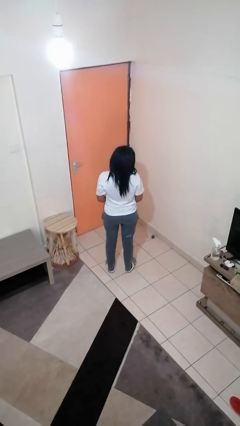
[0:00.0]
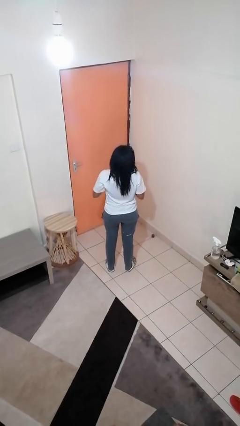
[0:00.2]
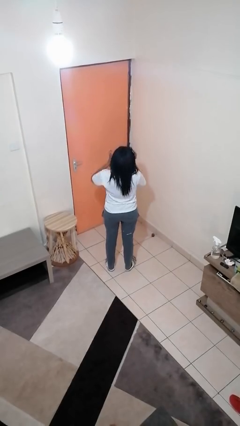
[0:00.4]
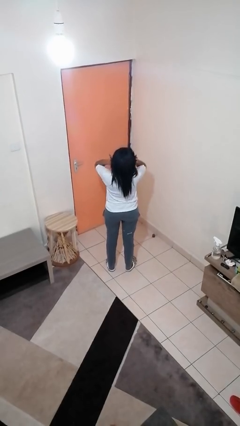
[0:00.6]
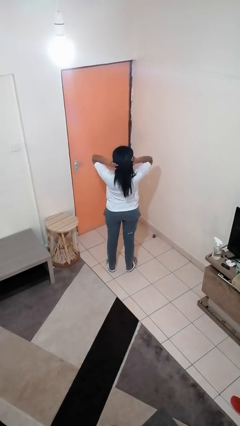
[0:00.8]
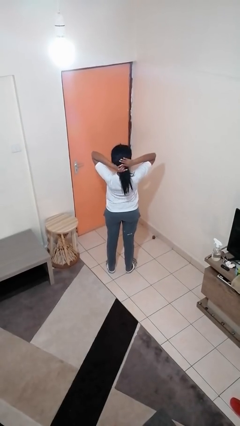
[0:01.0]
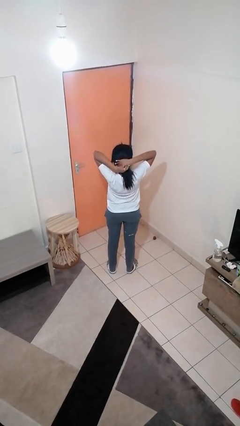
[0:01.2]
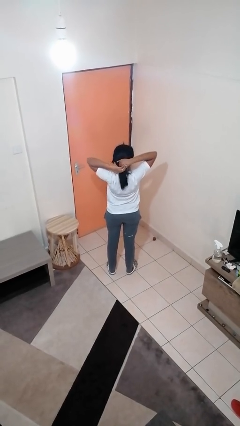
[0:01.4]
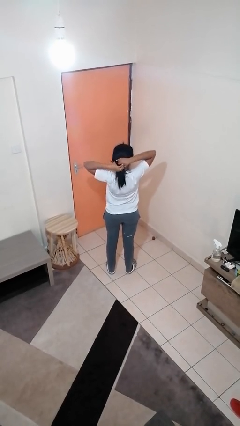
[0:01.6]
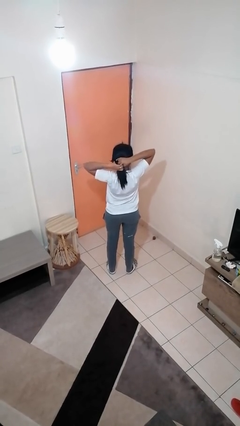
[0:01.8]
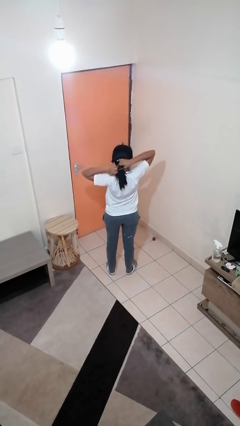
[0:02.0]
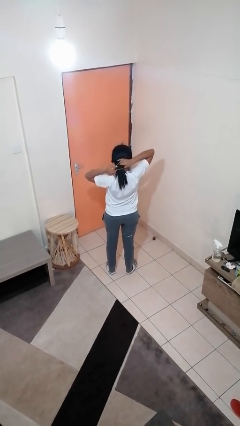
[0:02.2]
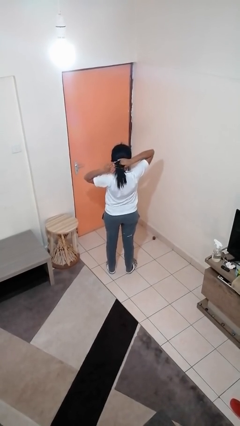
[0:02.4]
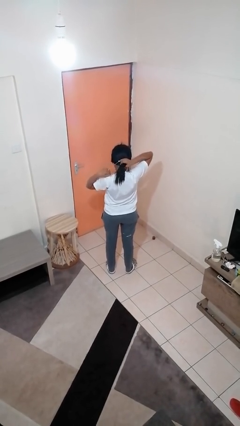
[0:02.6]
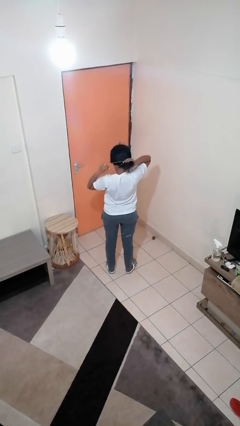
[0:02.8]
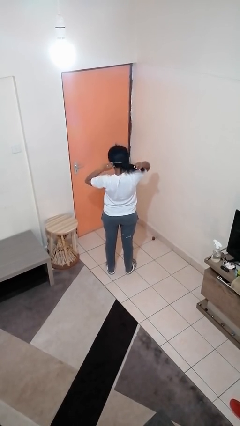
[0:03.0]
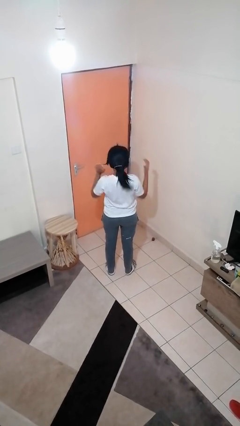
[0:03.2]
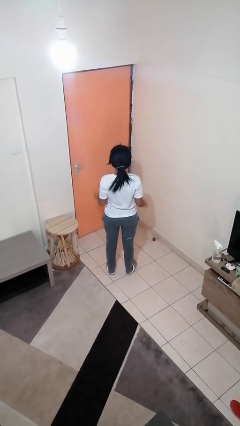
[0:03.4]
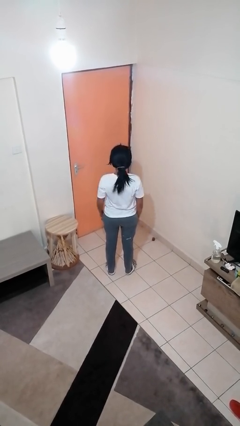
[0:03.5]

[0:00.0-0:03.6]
person puts hair in ponytail

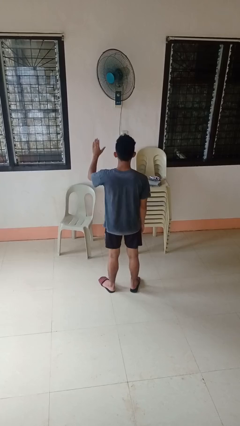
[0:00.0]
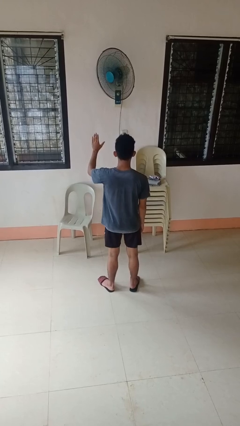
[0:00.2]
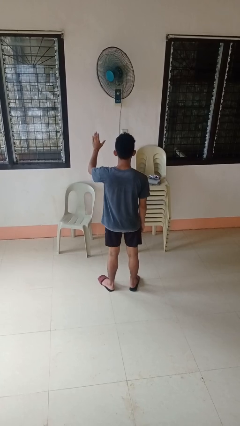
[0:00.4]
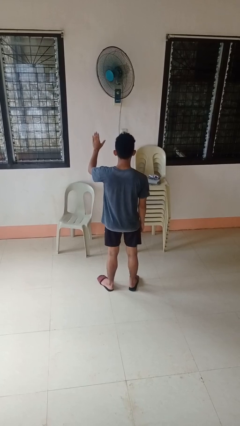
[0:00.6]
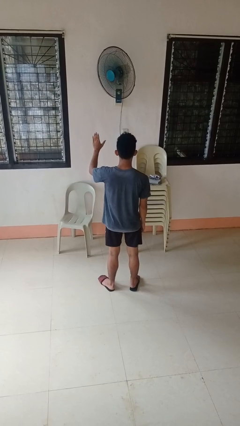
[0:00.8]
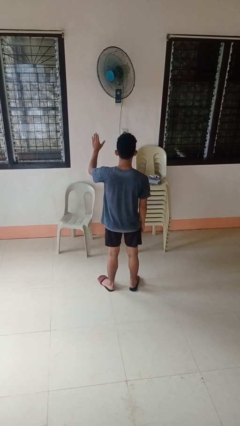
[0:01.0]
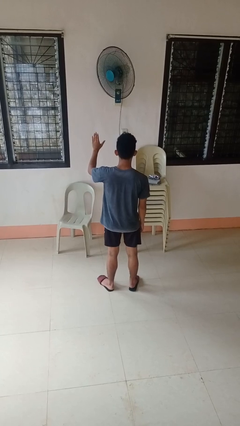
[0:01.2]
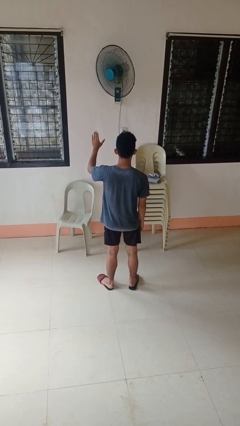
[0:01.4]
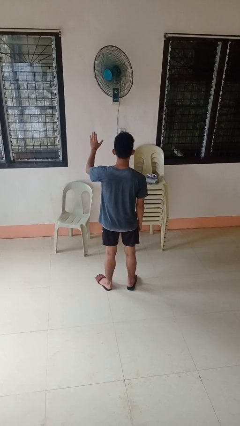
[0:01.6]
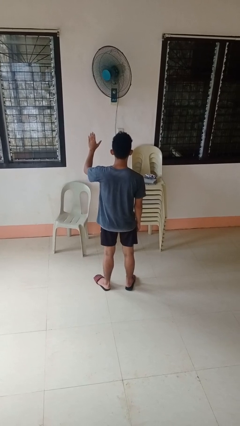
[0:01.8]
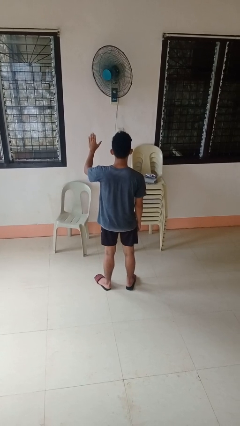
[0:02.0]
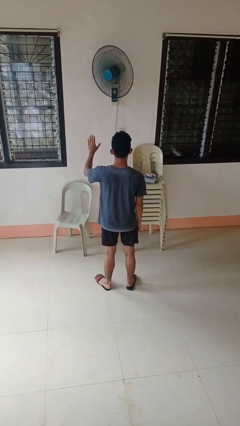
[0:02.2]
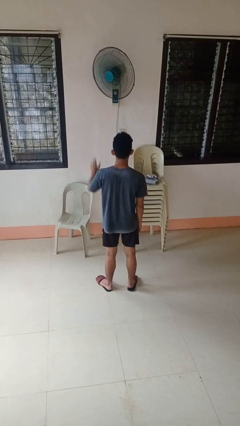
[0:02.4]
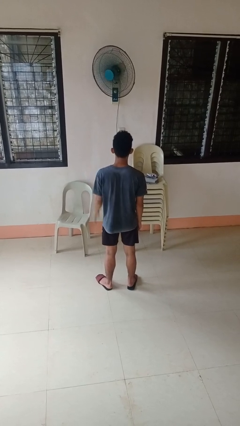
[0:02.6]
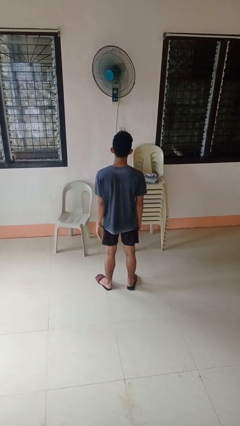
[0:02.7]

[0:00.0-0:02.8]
person gestures stop

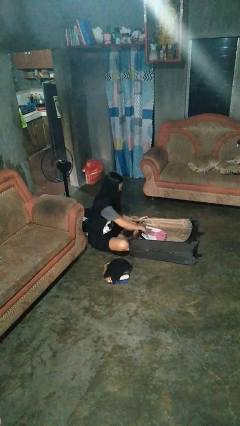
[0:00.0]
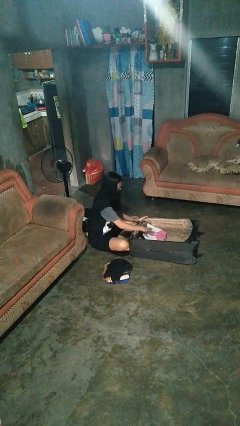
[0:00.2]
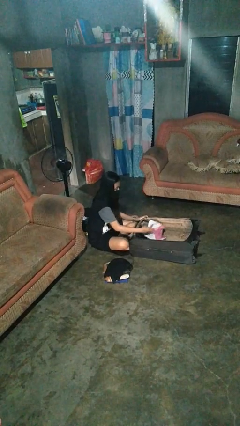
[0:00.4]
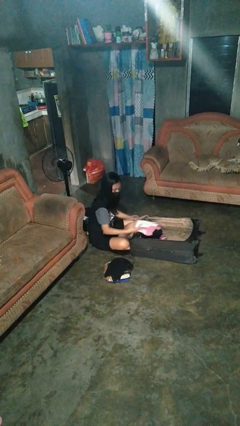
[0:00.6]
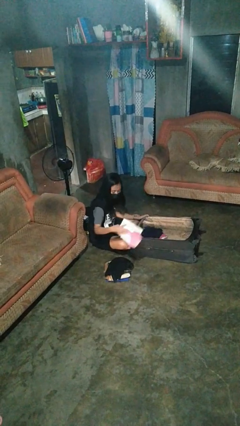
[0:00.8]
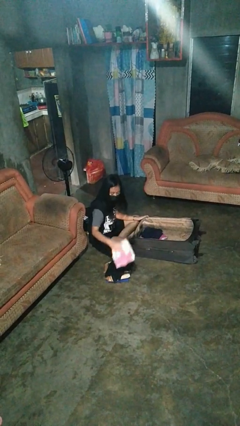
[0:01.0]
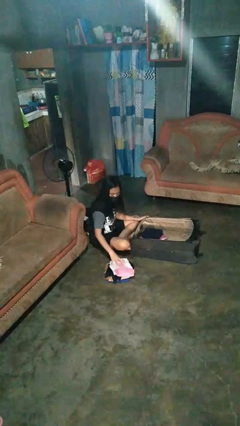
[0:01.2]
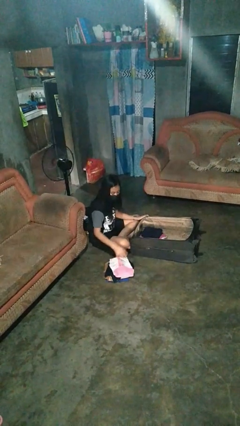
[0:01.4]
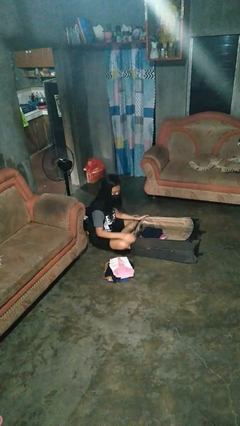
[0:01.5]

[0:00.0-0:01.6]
person unloads clothes from suitcase

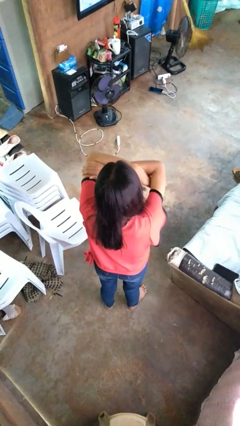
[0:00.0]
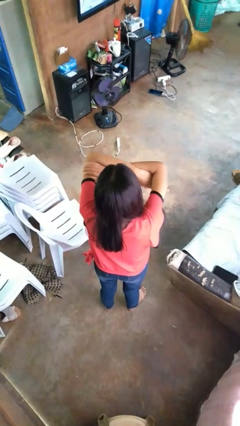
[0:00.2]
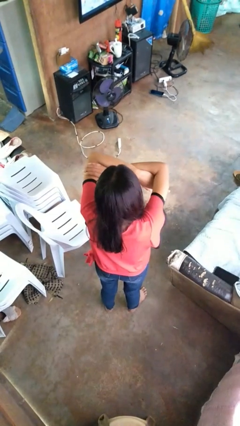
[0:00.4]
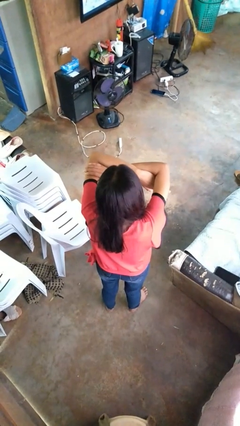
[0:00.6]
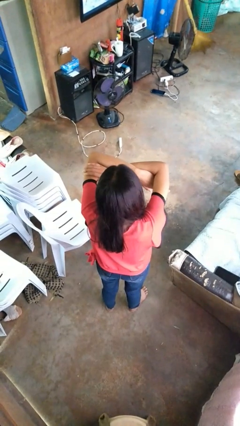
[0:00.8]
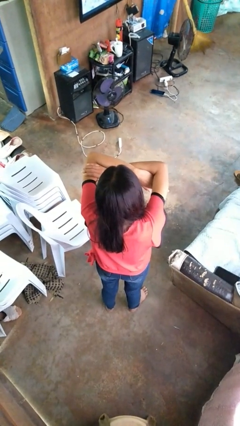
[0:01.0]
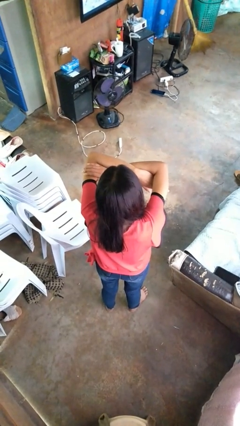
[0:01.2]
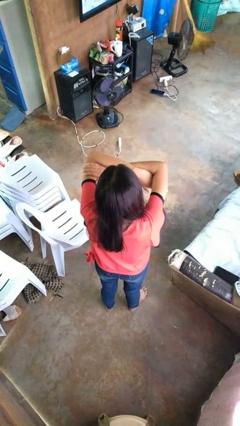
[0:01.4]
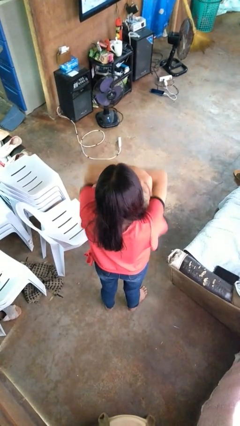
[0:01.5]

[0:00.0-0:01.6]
person gestures arms x

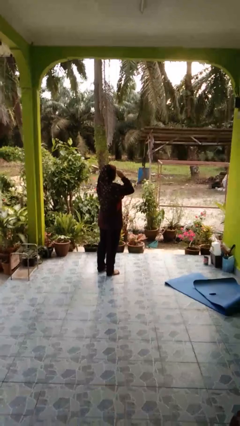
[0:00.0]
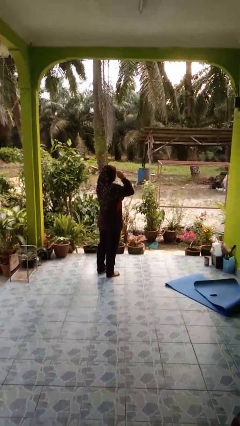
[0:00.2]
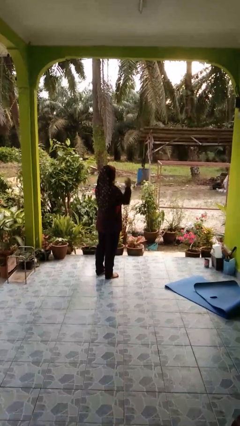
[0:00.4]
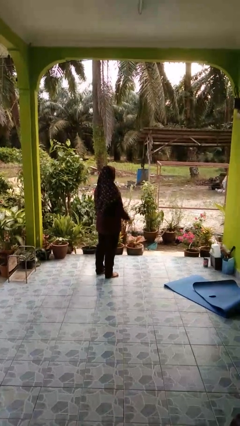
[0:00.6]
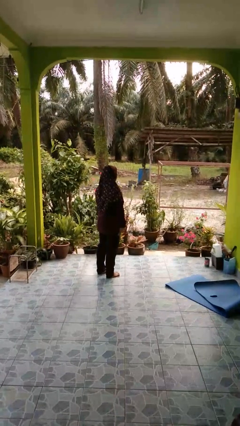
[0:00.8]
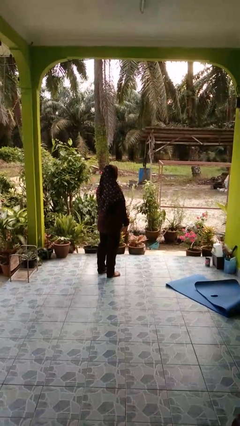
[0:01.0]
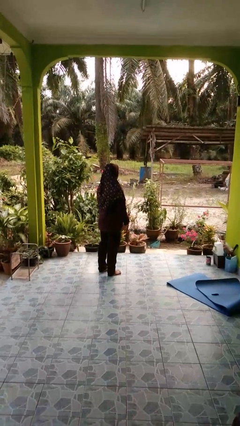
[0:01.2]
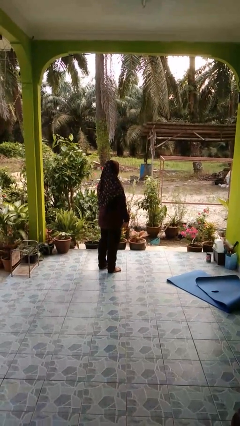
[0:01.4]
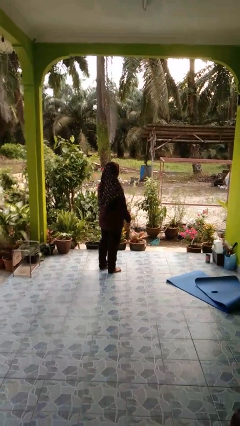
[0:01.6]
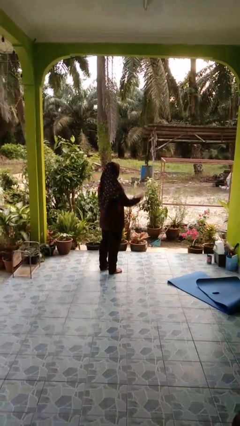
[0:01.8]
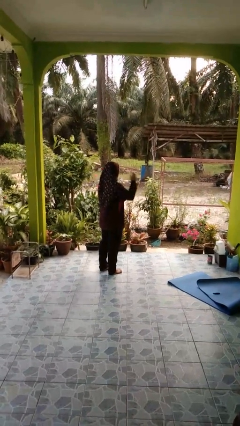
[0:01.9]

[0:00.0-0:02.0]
person puts on glasses

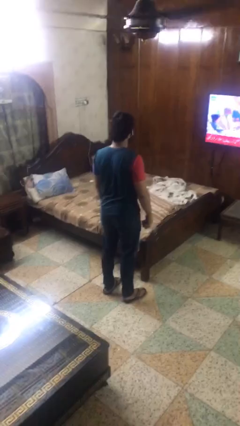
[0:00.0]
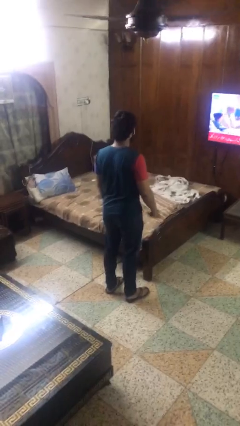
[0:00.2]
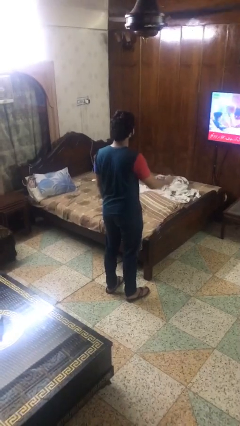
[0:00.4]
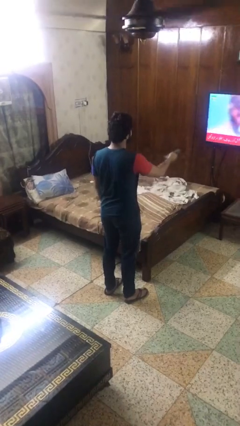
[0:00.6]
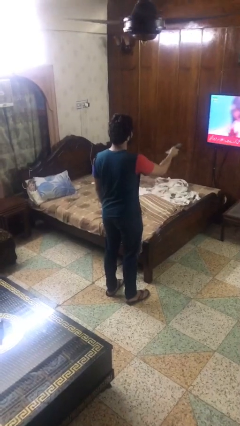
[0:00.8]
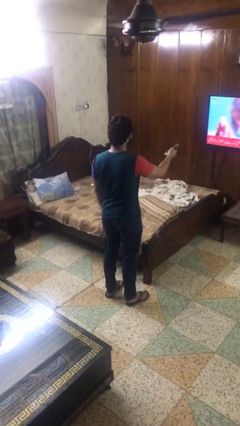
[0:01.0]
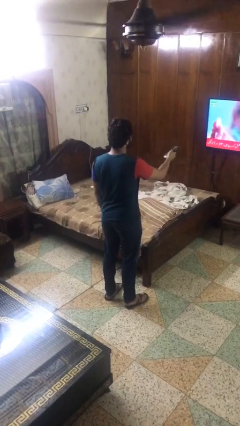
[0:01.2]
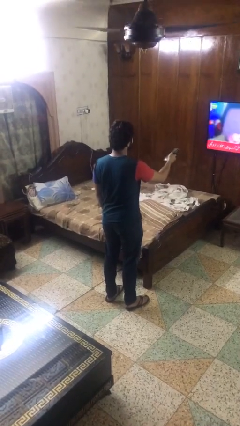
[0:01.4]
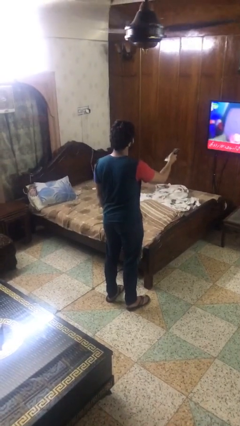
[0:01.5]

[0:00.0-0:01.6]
person uses television remote

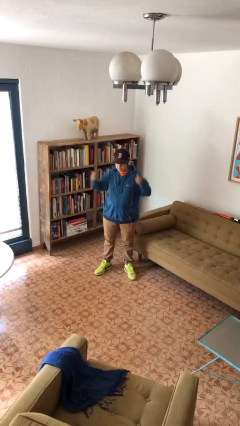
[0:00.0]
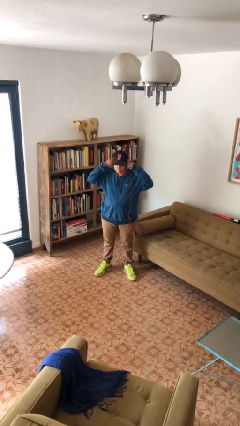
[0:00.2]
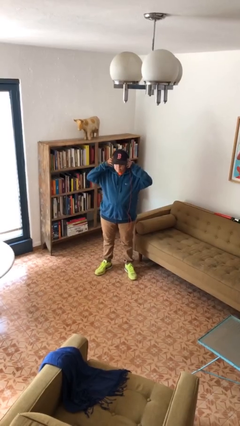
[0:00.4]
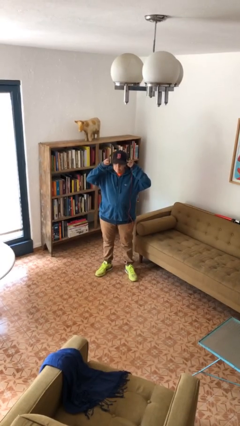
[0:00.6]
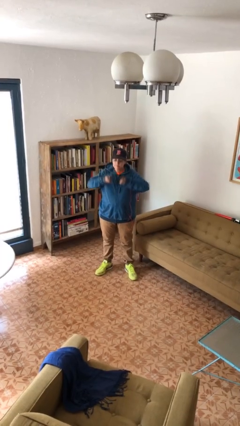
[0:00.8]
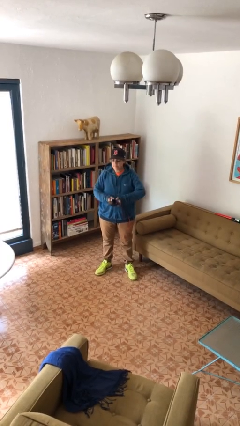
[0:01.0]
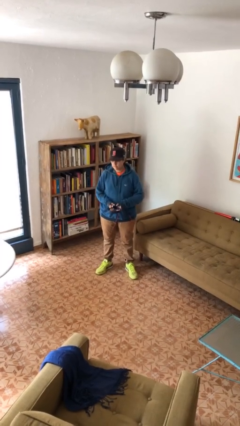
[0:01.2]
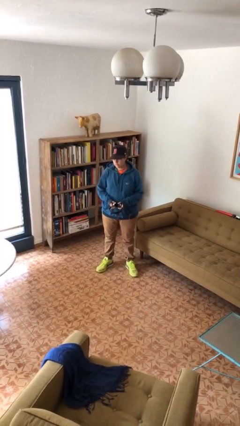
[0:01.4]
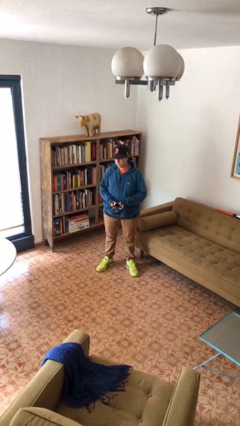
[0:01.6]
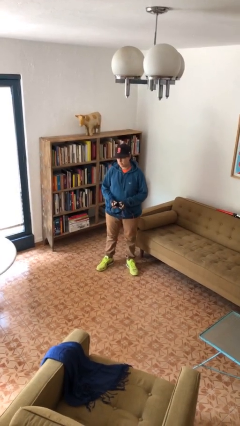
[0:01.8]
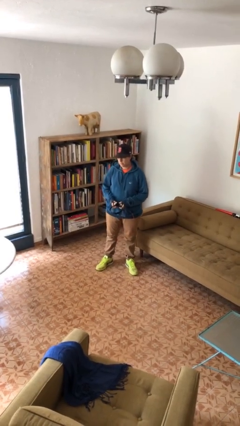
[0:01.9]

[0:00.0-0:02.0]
person takes off headphones

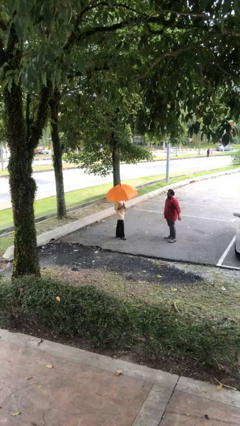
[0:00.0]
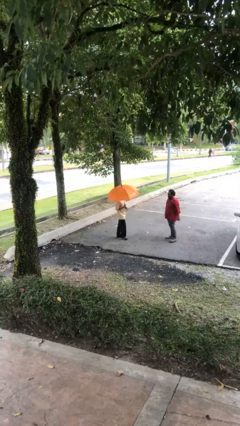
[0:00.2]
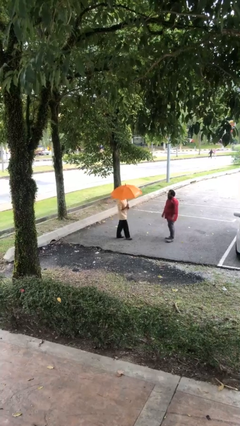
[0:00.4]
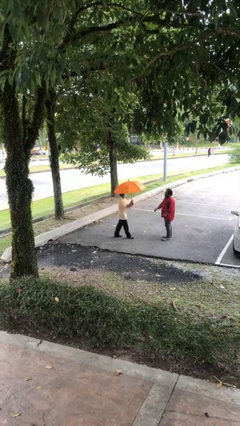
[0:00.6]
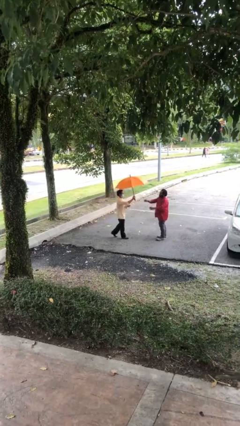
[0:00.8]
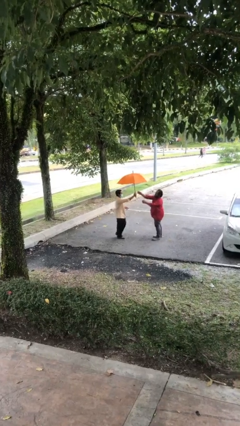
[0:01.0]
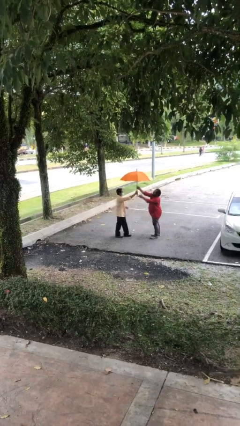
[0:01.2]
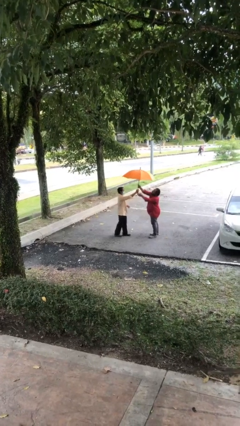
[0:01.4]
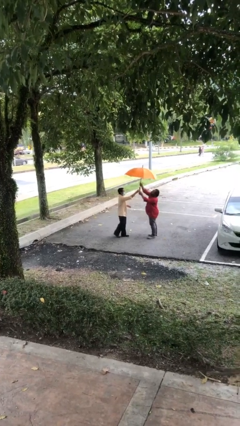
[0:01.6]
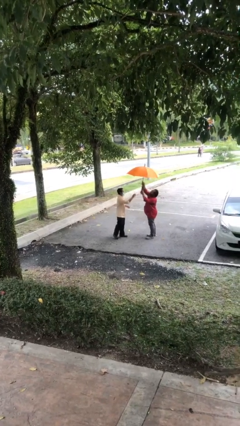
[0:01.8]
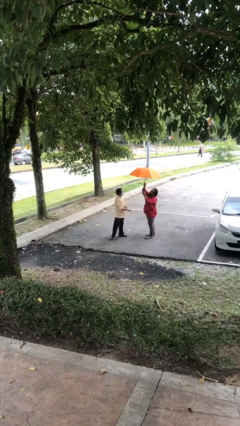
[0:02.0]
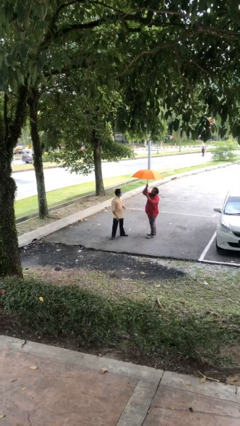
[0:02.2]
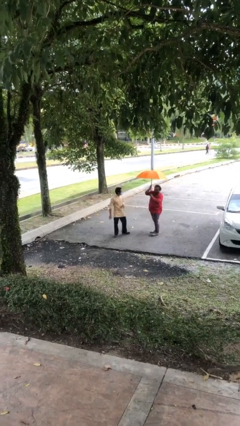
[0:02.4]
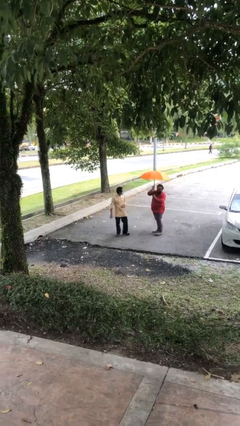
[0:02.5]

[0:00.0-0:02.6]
person transfers object to person
